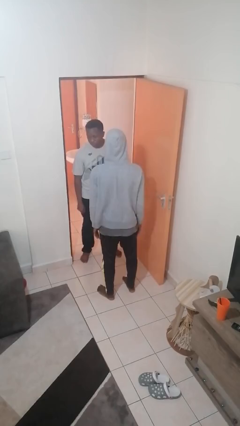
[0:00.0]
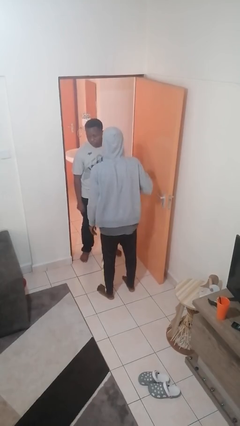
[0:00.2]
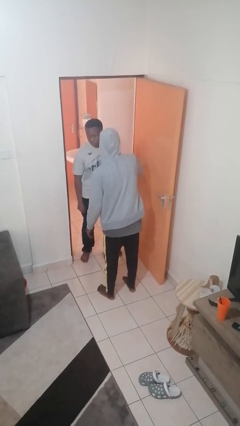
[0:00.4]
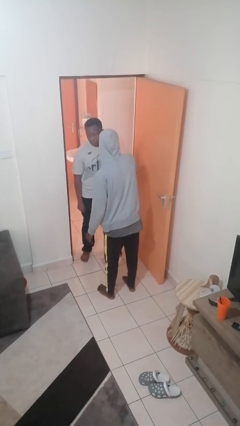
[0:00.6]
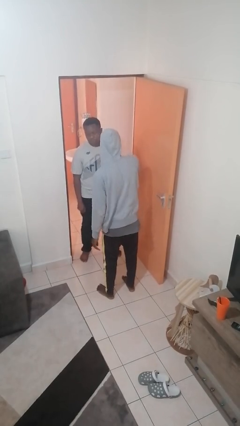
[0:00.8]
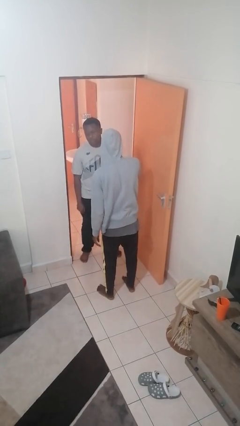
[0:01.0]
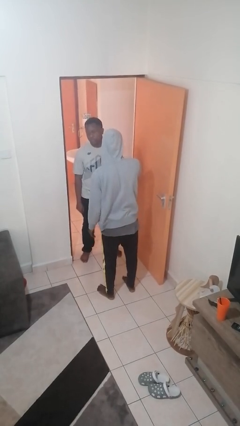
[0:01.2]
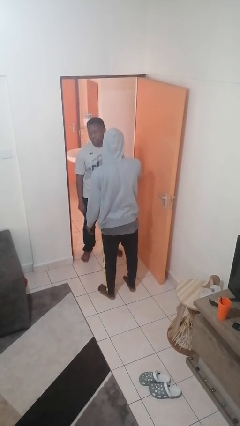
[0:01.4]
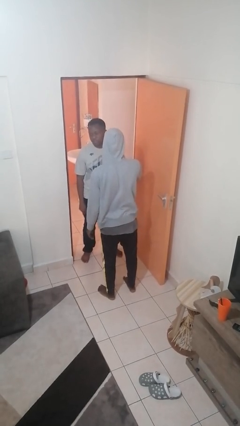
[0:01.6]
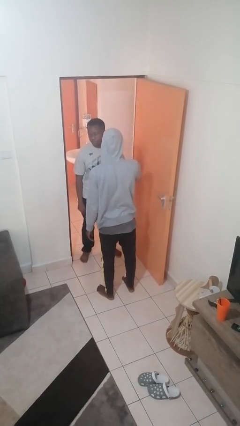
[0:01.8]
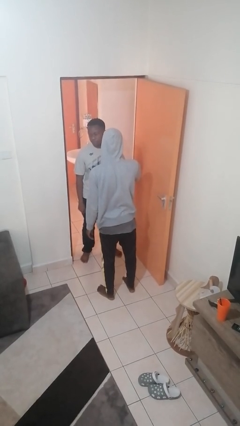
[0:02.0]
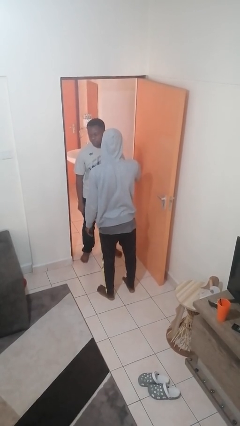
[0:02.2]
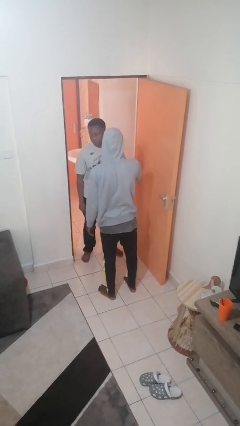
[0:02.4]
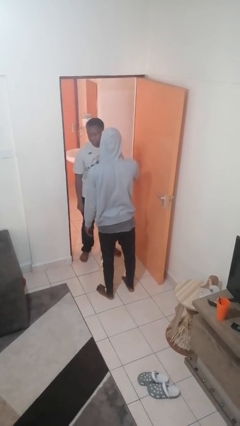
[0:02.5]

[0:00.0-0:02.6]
person grabs person by bicep

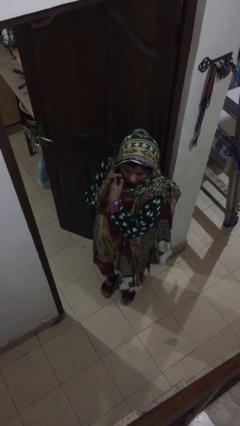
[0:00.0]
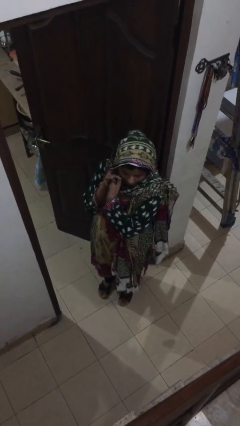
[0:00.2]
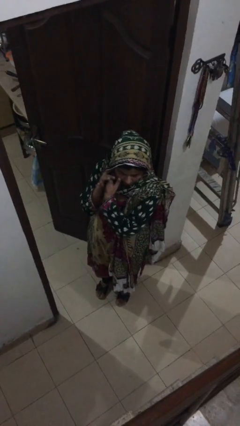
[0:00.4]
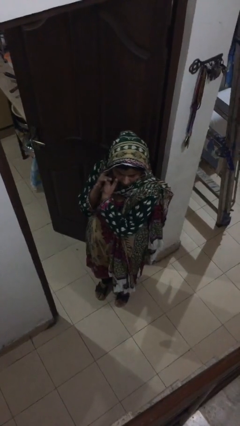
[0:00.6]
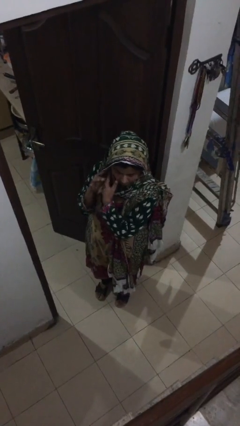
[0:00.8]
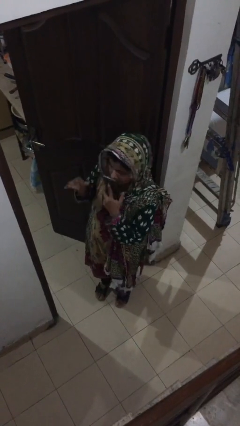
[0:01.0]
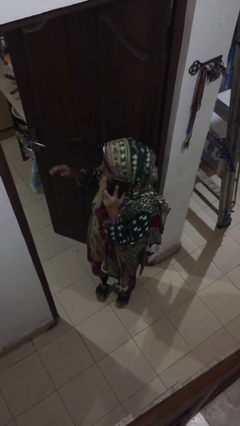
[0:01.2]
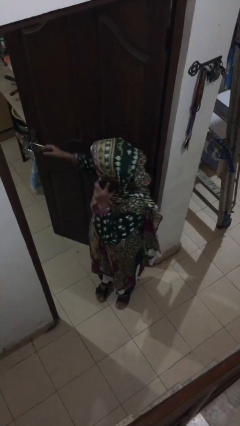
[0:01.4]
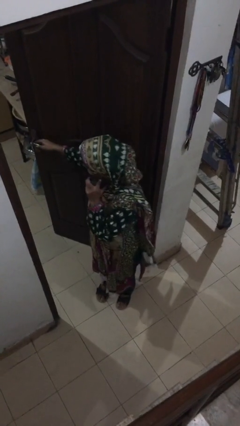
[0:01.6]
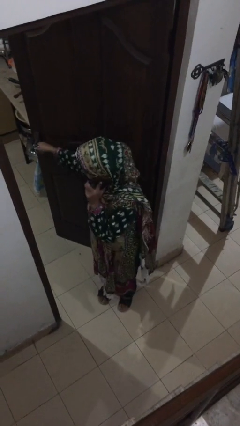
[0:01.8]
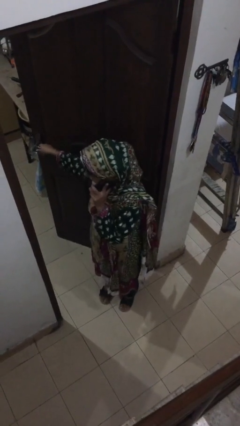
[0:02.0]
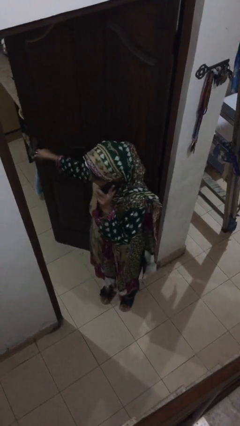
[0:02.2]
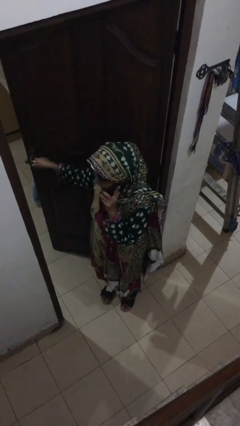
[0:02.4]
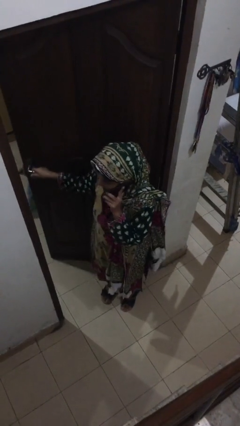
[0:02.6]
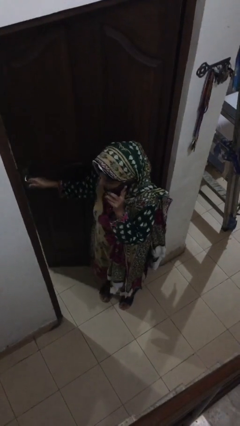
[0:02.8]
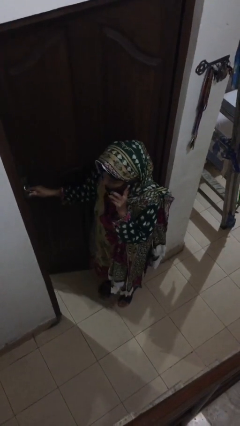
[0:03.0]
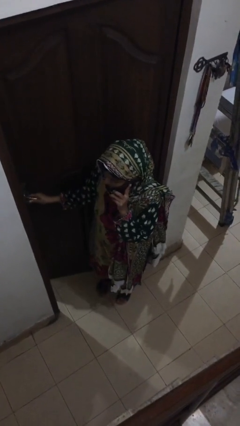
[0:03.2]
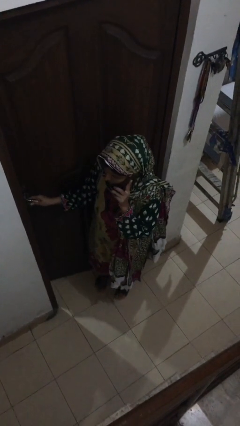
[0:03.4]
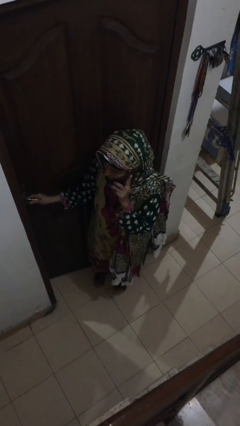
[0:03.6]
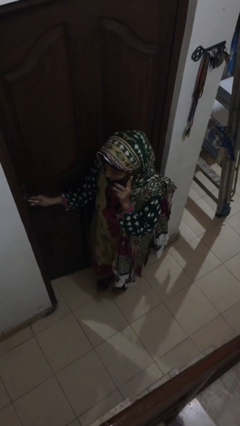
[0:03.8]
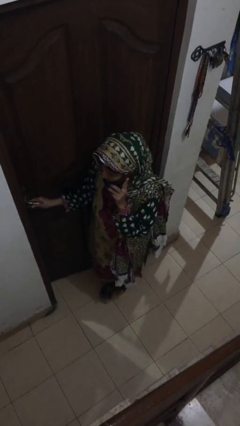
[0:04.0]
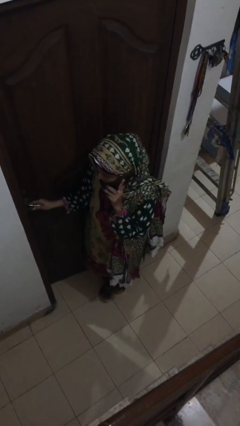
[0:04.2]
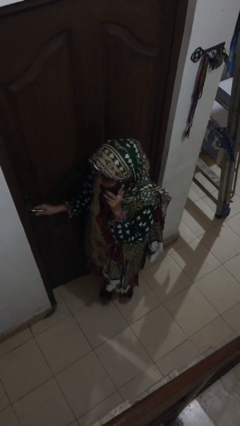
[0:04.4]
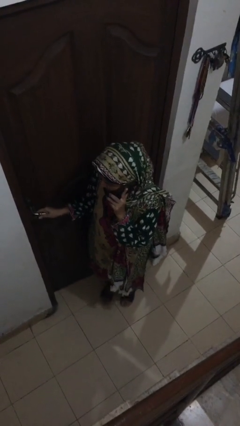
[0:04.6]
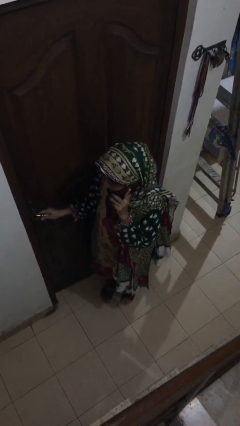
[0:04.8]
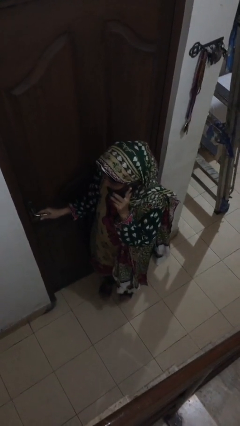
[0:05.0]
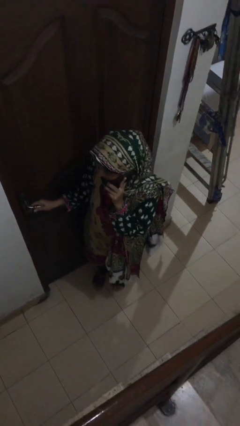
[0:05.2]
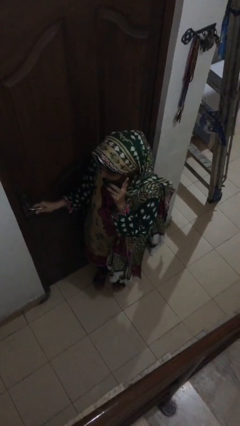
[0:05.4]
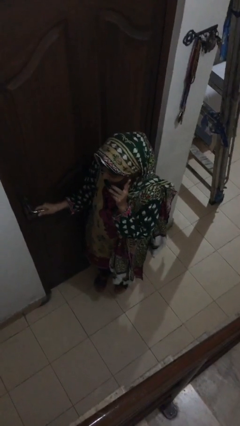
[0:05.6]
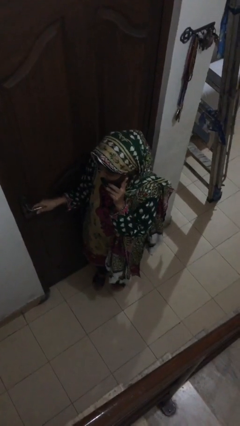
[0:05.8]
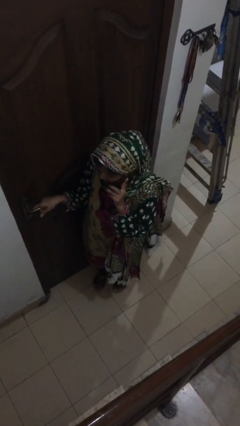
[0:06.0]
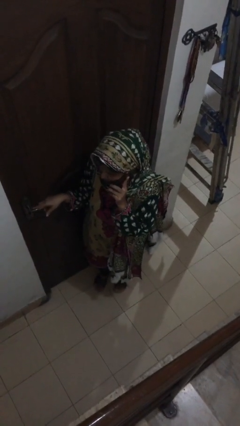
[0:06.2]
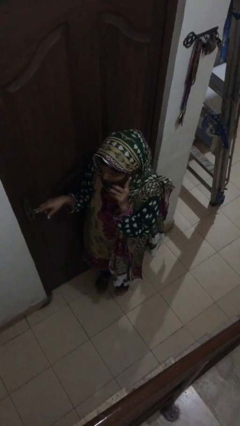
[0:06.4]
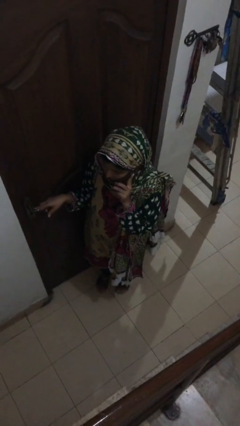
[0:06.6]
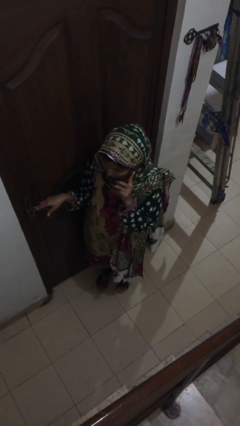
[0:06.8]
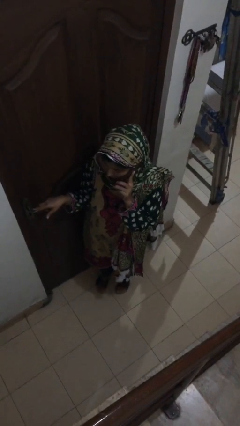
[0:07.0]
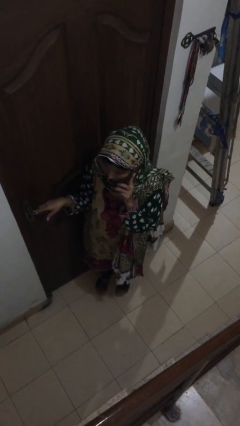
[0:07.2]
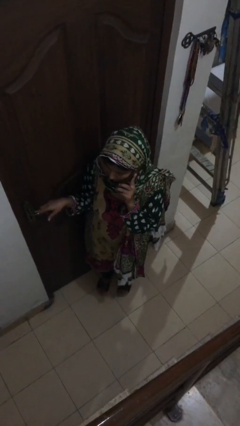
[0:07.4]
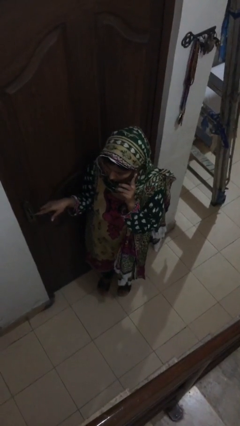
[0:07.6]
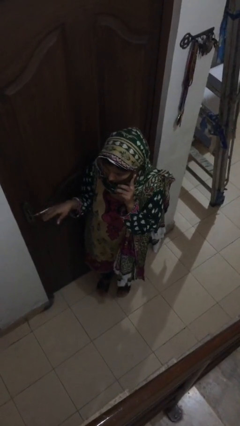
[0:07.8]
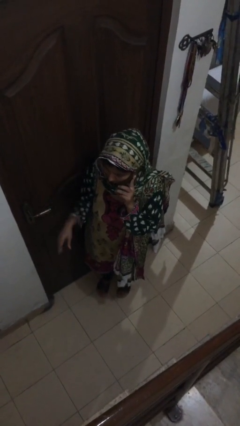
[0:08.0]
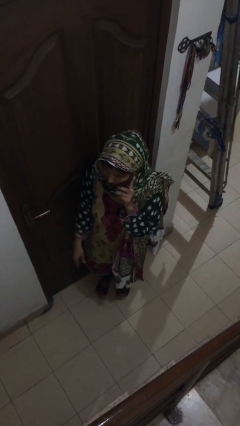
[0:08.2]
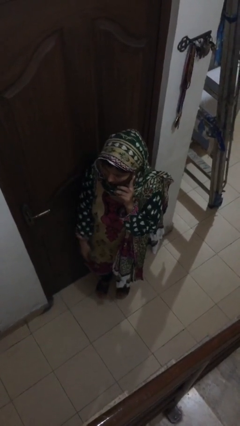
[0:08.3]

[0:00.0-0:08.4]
person closes facility door

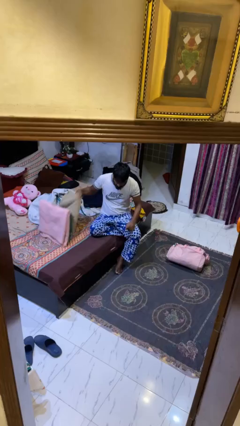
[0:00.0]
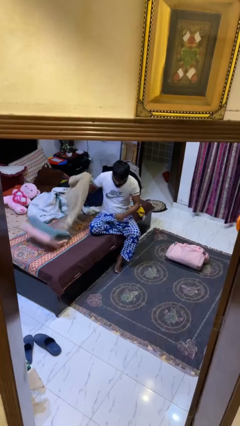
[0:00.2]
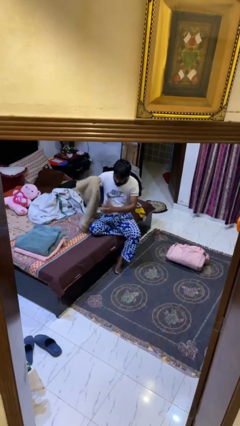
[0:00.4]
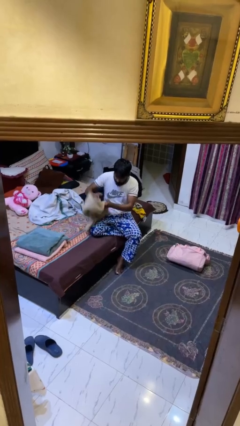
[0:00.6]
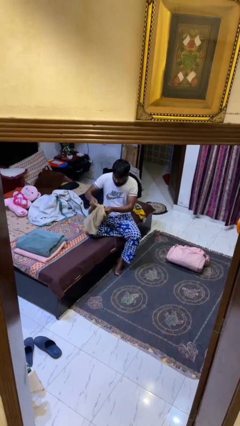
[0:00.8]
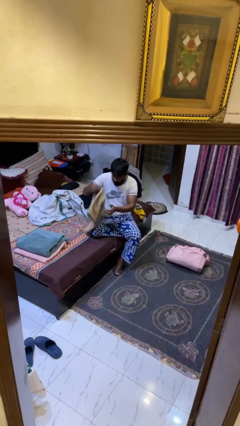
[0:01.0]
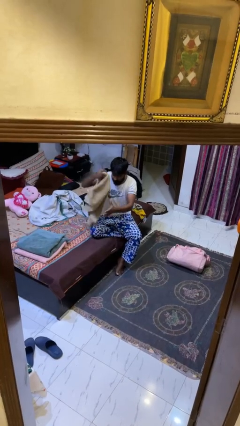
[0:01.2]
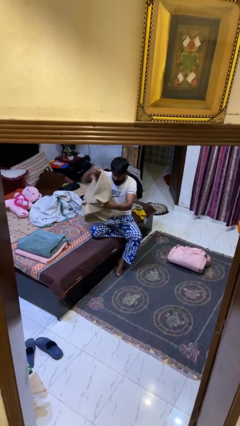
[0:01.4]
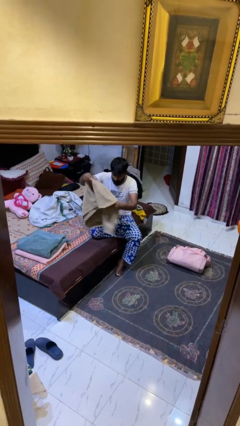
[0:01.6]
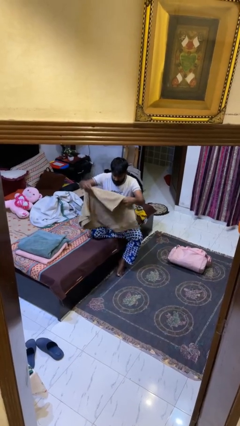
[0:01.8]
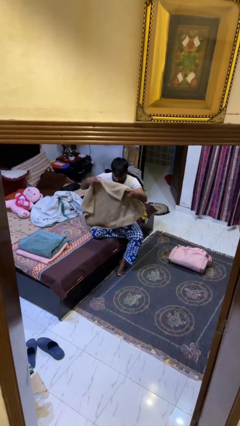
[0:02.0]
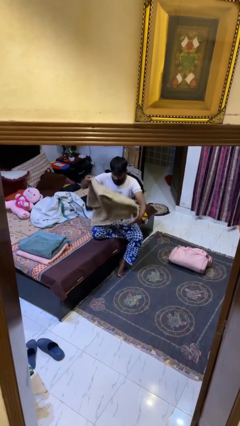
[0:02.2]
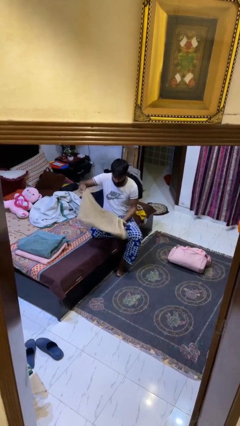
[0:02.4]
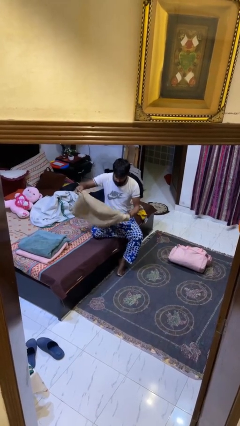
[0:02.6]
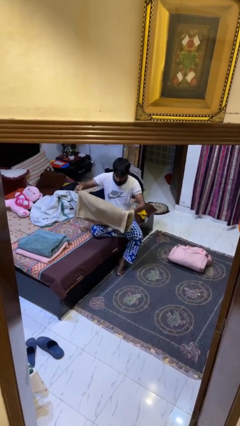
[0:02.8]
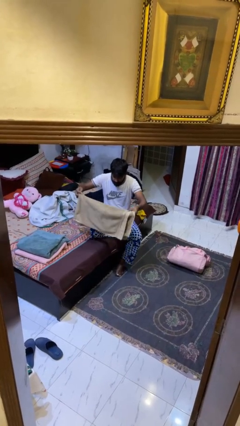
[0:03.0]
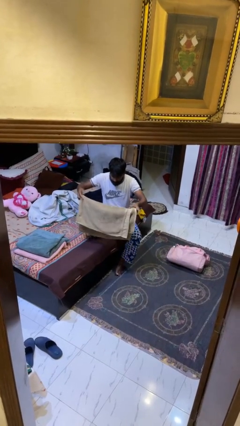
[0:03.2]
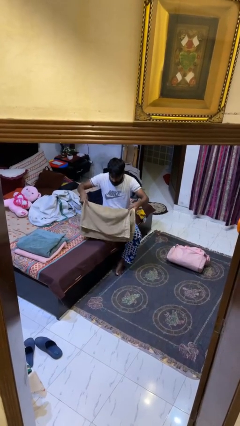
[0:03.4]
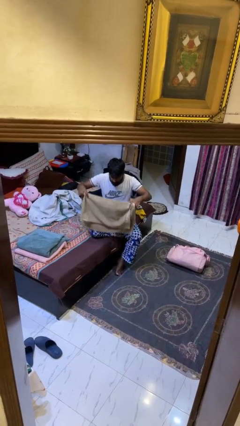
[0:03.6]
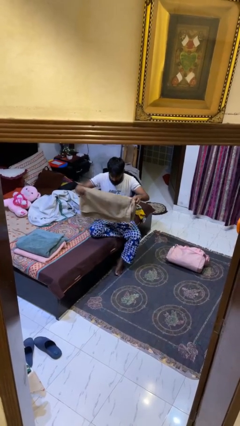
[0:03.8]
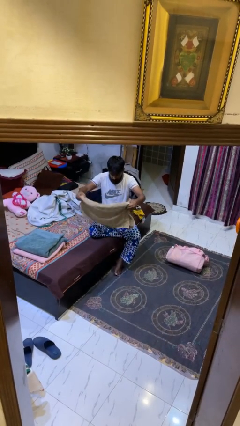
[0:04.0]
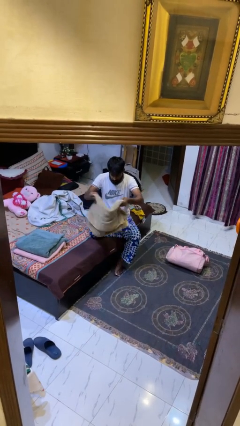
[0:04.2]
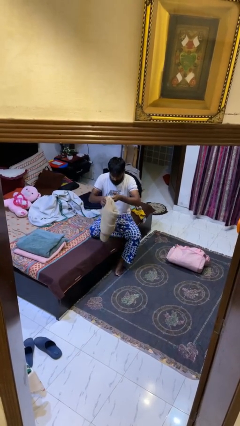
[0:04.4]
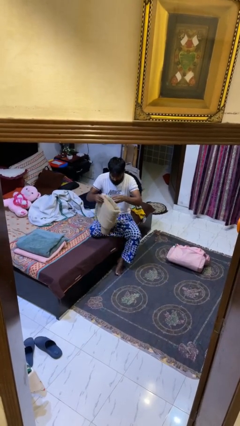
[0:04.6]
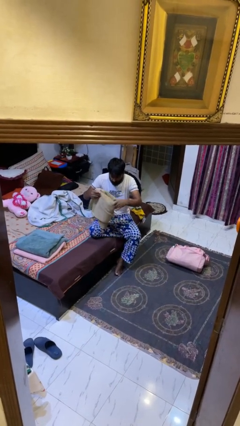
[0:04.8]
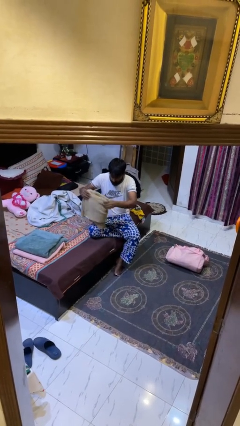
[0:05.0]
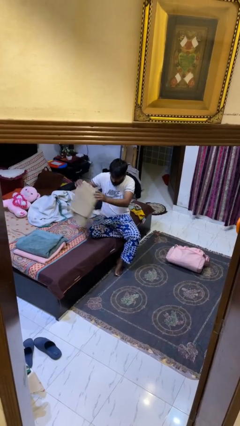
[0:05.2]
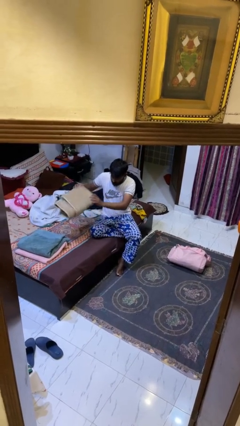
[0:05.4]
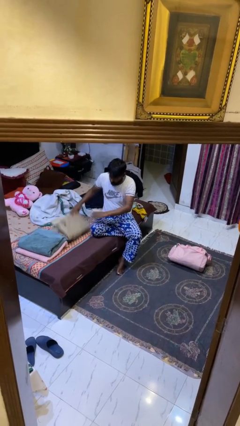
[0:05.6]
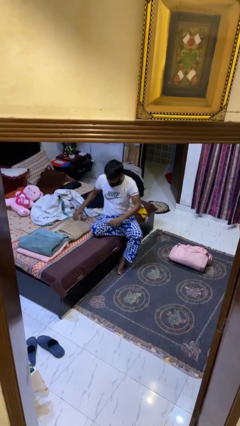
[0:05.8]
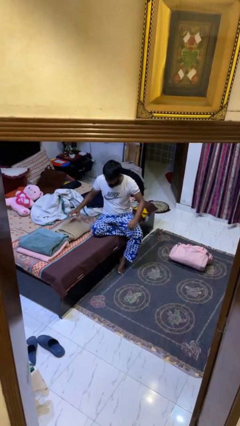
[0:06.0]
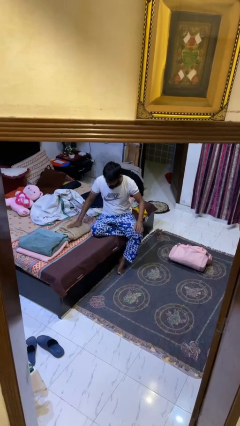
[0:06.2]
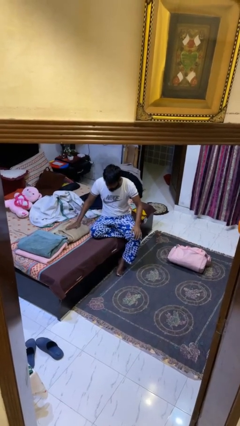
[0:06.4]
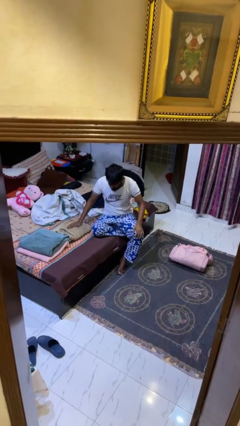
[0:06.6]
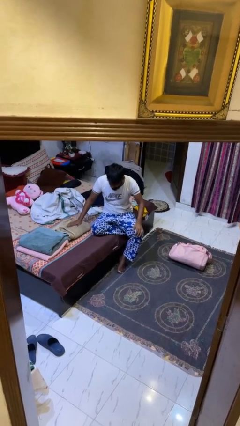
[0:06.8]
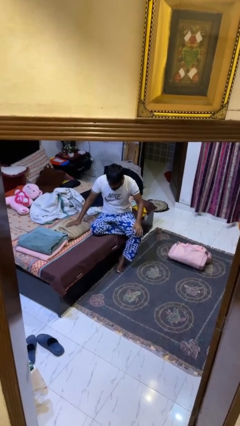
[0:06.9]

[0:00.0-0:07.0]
person folds towel

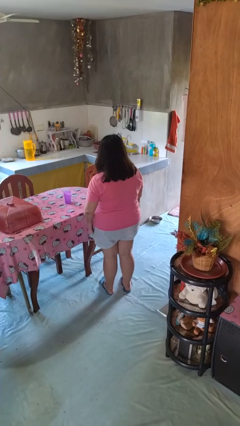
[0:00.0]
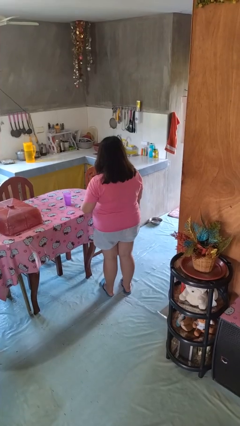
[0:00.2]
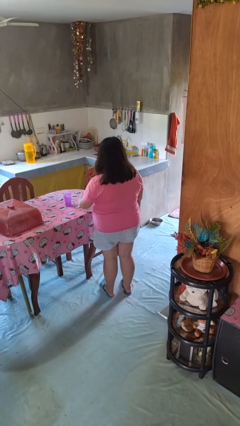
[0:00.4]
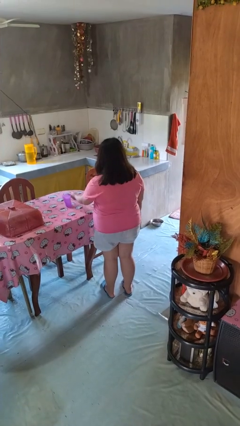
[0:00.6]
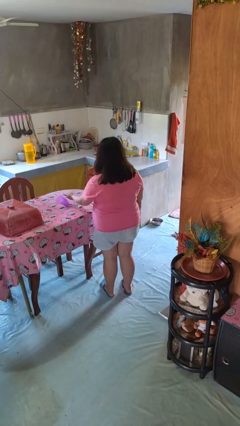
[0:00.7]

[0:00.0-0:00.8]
person knocks over glass
